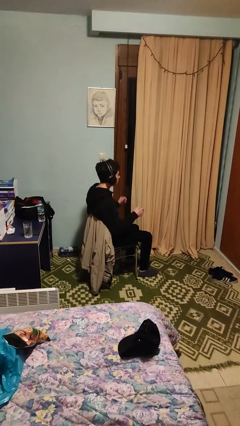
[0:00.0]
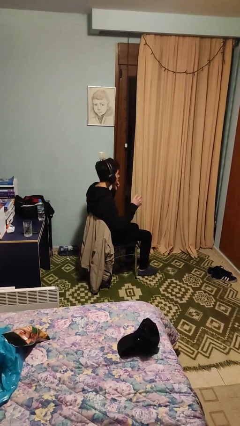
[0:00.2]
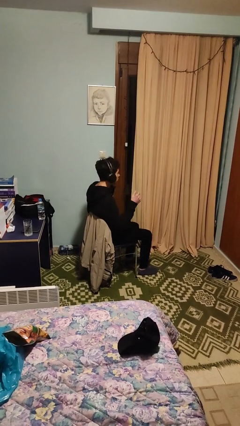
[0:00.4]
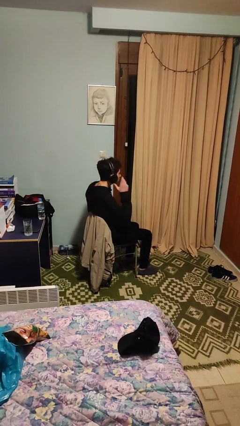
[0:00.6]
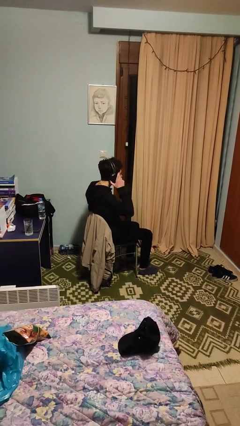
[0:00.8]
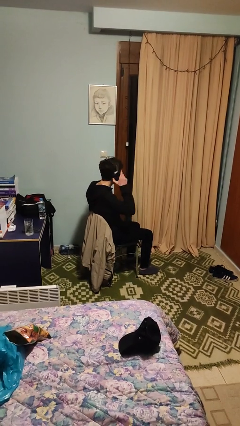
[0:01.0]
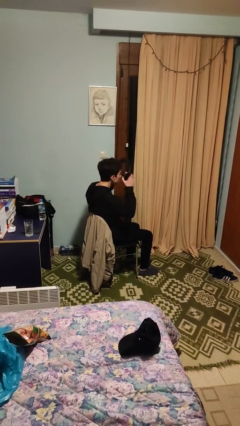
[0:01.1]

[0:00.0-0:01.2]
person takes off headphones

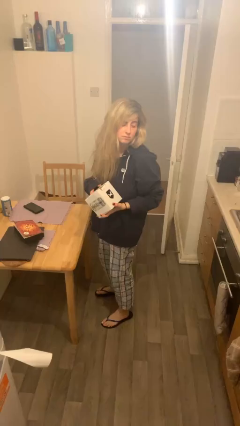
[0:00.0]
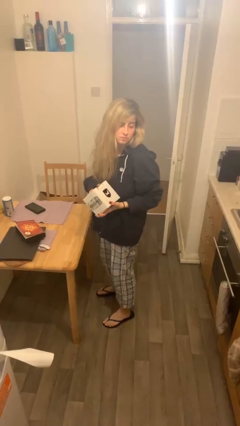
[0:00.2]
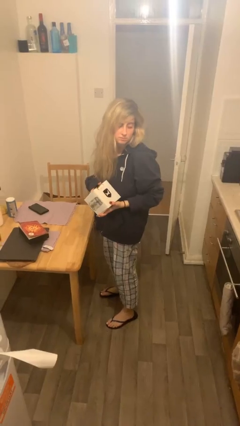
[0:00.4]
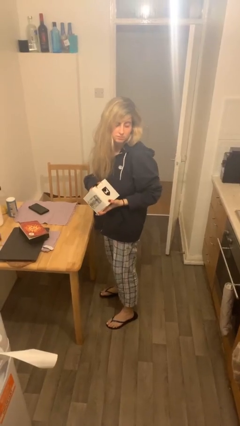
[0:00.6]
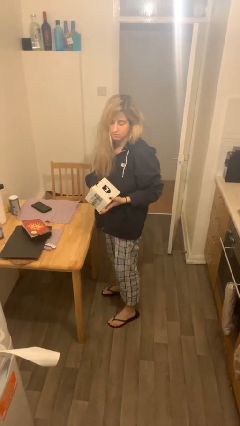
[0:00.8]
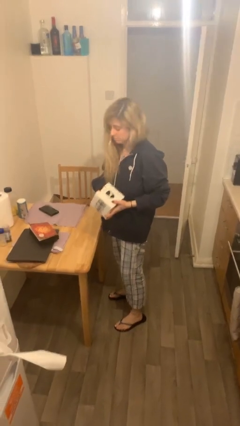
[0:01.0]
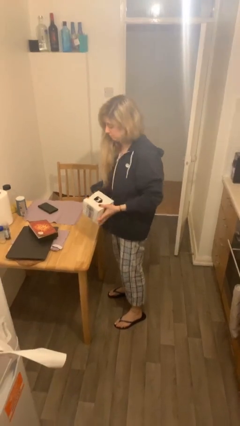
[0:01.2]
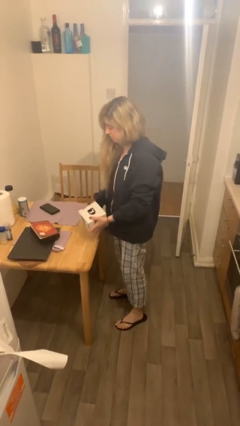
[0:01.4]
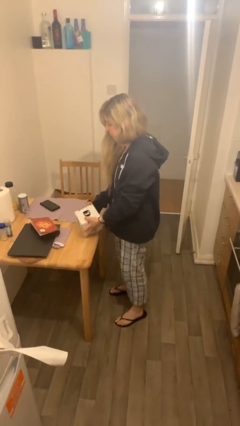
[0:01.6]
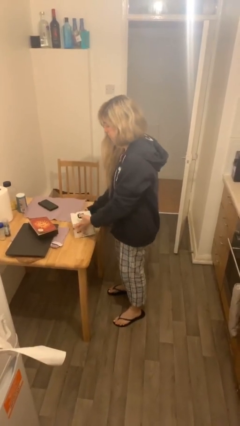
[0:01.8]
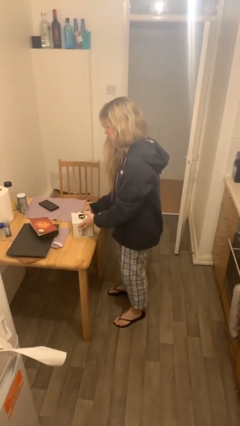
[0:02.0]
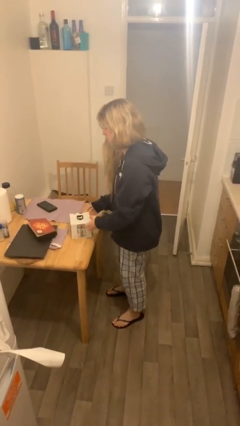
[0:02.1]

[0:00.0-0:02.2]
person puts down object on table

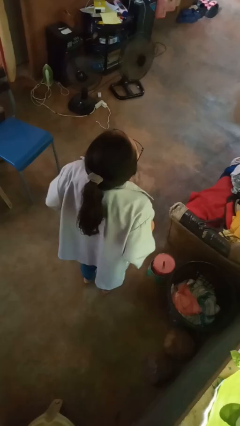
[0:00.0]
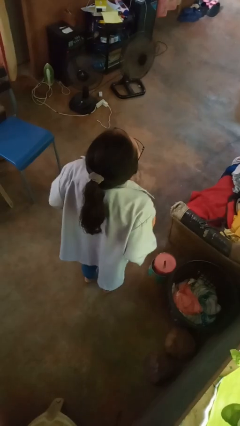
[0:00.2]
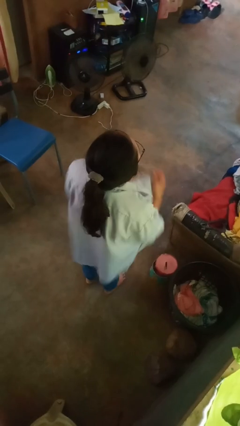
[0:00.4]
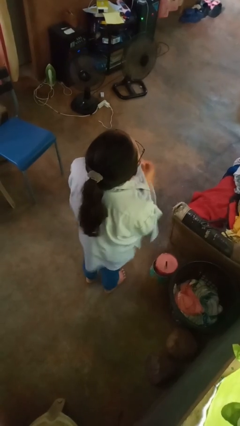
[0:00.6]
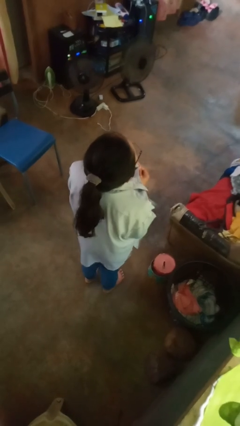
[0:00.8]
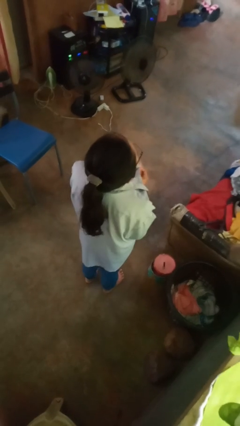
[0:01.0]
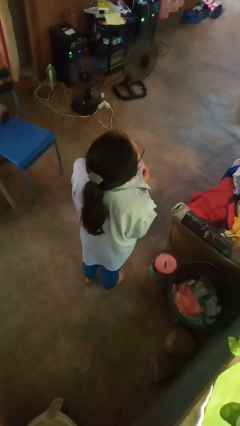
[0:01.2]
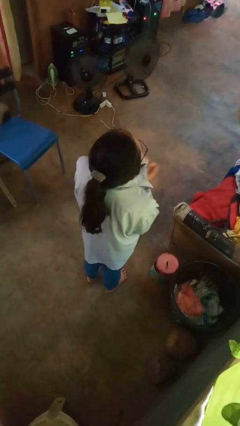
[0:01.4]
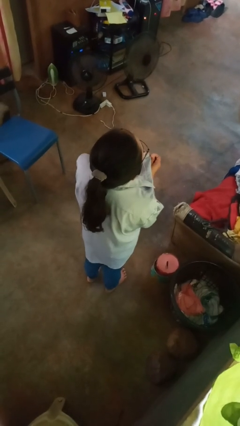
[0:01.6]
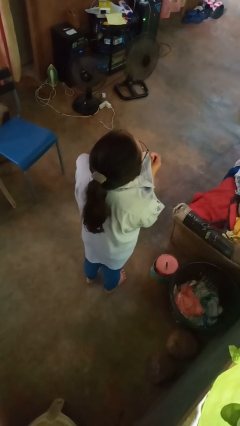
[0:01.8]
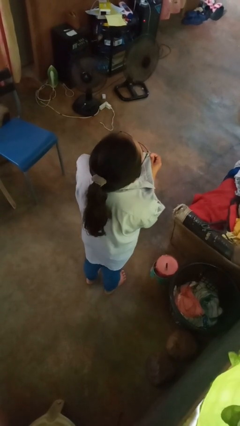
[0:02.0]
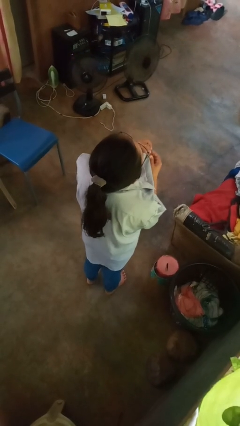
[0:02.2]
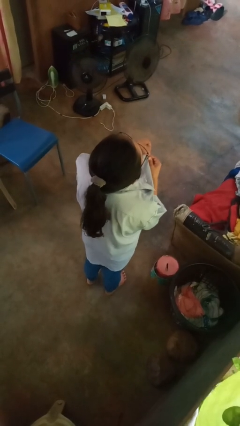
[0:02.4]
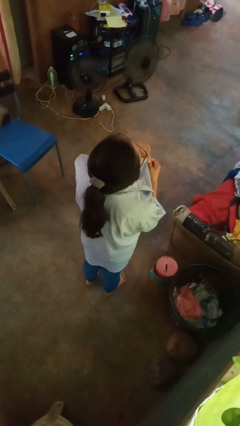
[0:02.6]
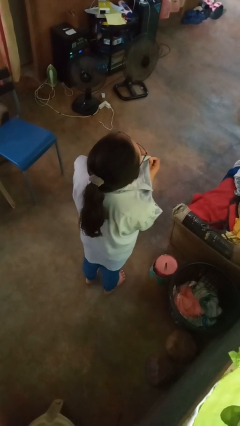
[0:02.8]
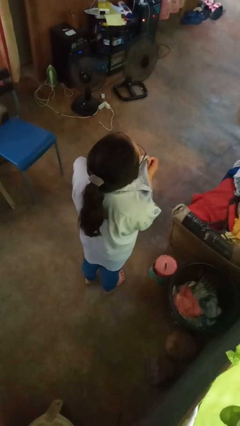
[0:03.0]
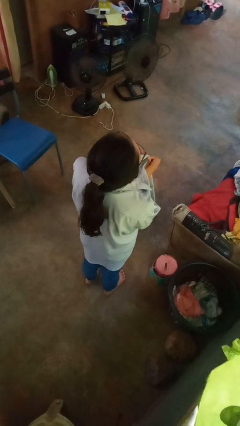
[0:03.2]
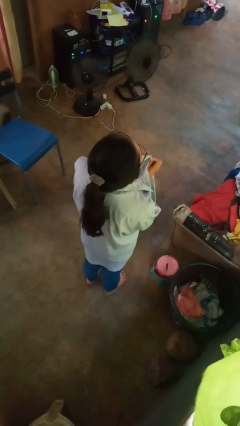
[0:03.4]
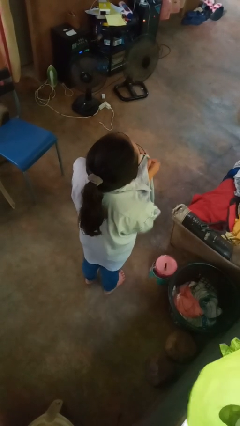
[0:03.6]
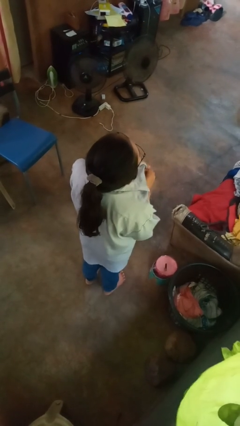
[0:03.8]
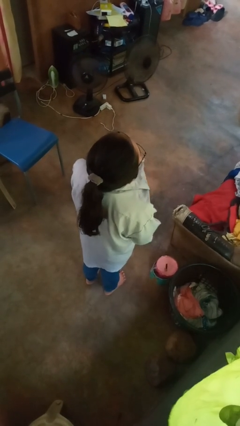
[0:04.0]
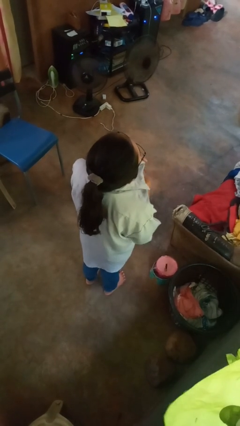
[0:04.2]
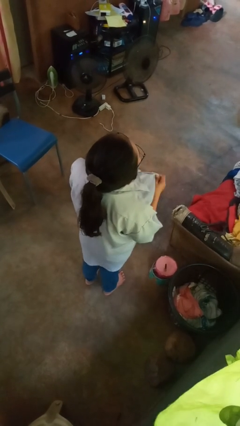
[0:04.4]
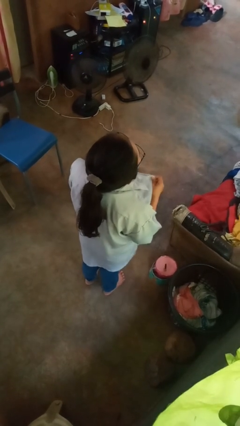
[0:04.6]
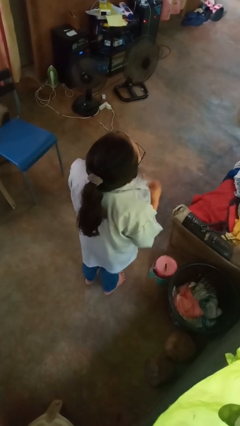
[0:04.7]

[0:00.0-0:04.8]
person buttons shirt

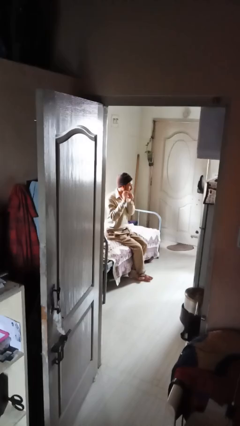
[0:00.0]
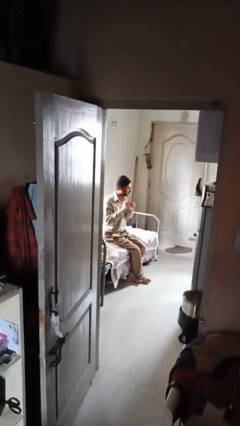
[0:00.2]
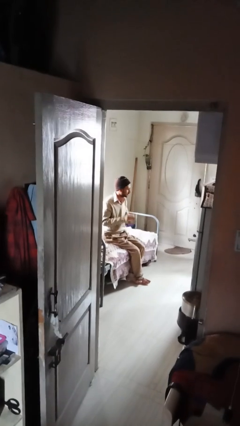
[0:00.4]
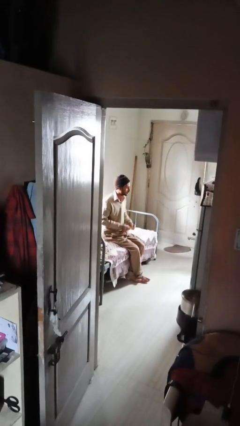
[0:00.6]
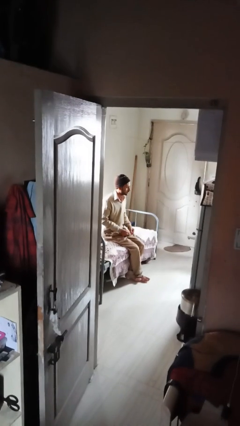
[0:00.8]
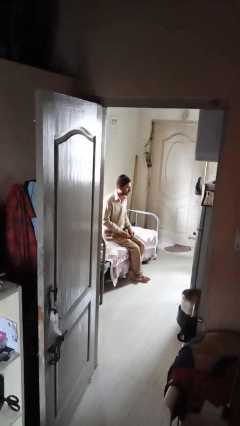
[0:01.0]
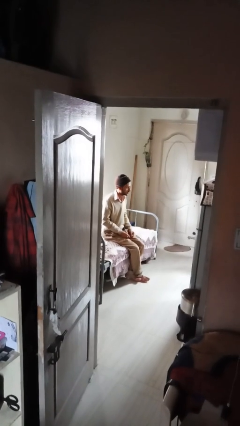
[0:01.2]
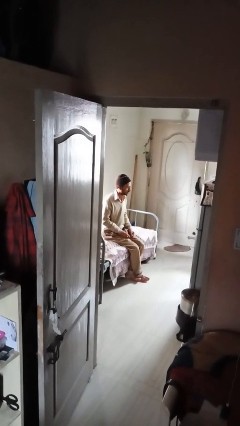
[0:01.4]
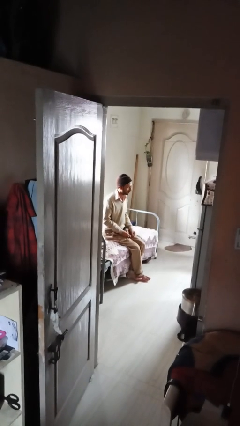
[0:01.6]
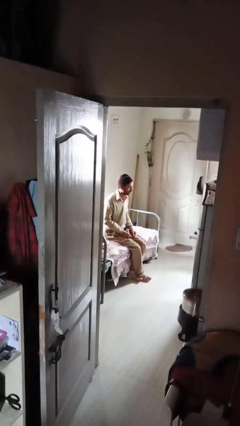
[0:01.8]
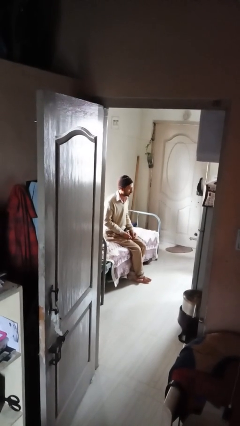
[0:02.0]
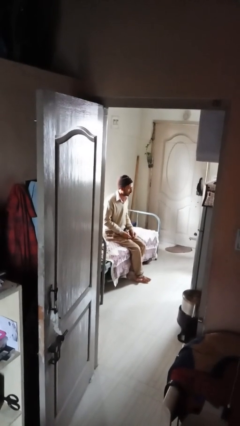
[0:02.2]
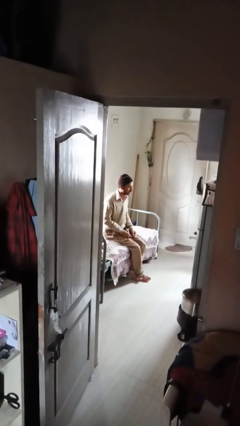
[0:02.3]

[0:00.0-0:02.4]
person takes off earrings

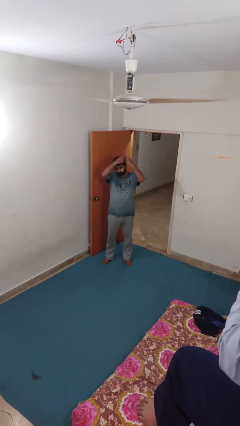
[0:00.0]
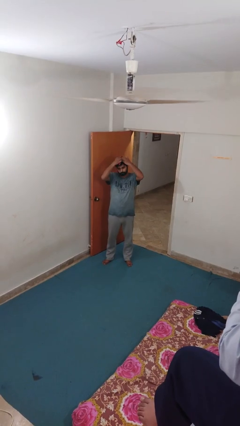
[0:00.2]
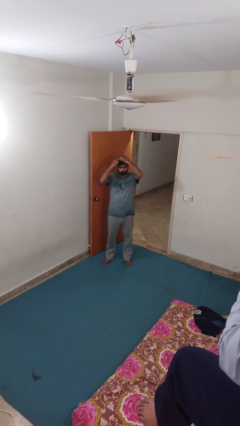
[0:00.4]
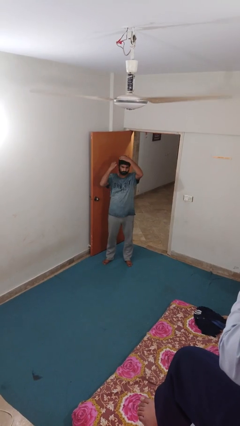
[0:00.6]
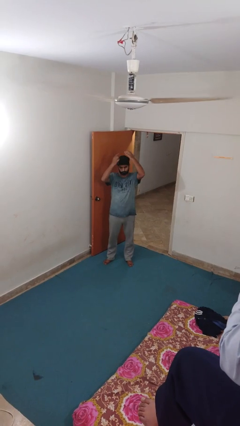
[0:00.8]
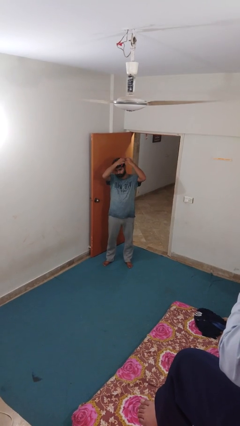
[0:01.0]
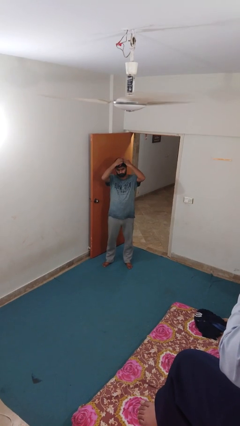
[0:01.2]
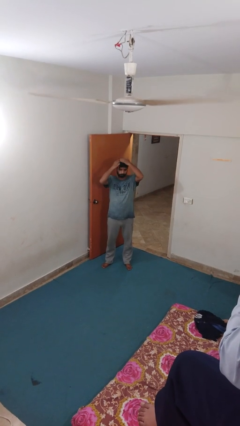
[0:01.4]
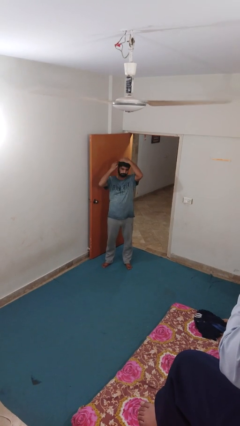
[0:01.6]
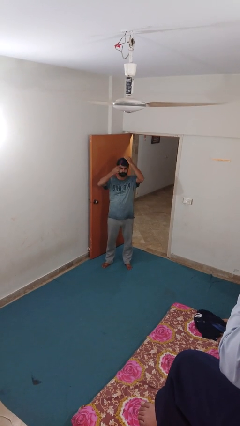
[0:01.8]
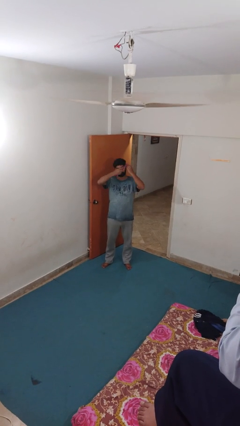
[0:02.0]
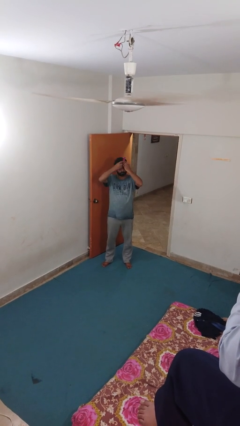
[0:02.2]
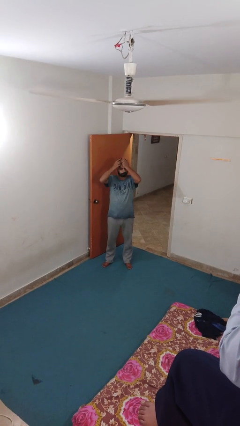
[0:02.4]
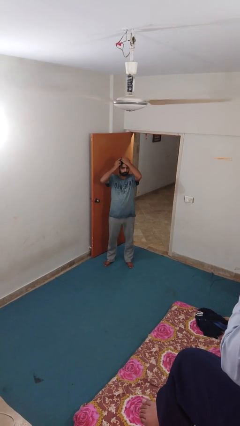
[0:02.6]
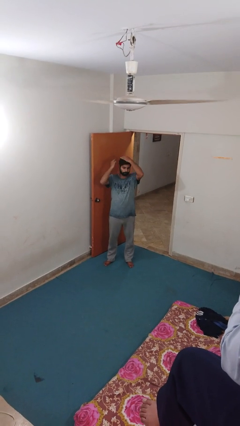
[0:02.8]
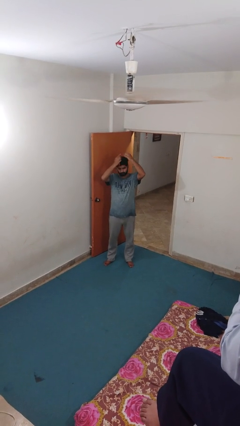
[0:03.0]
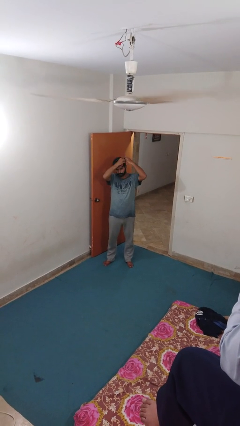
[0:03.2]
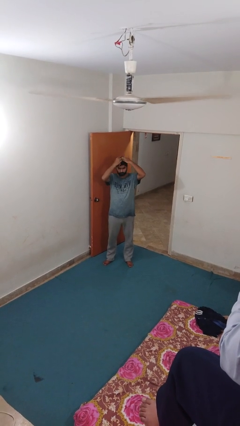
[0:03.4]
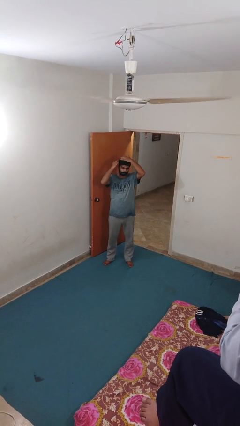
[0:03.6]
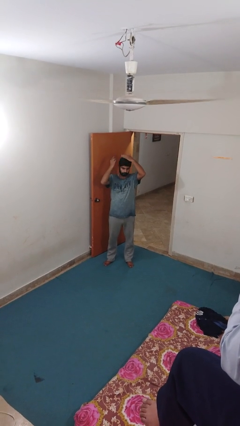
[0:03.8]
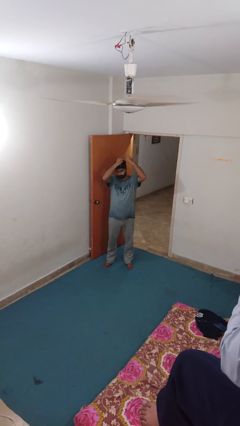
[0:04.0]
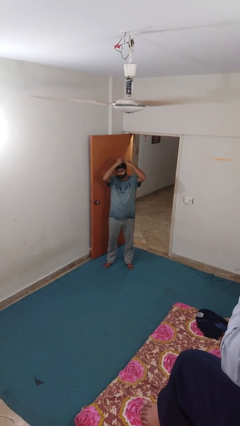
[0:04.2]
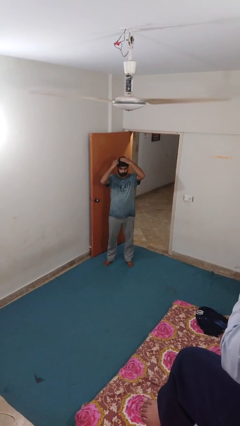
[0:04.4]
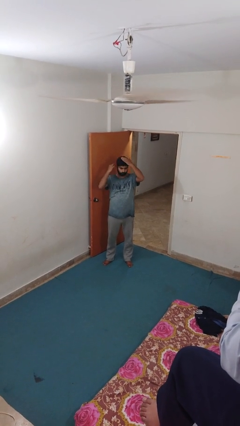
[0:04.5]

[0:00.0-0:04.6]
person brushes hair

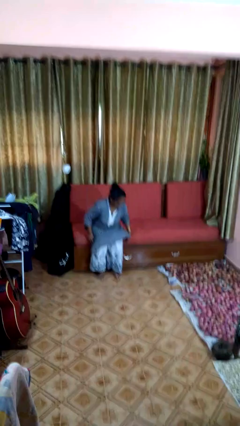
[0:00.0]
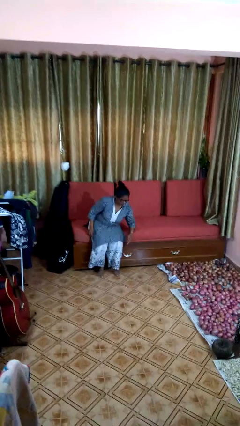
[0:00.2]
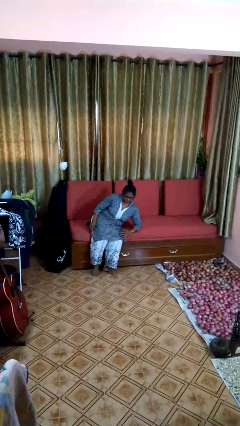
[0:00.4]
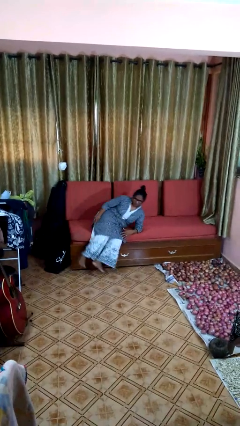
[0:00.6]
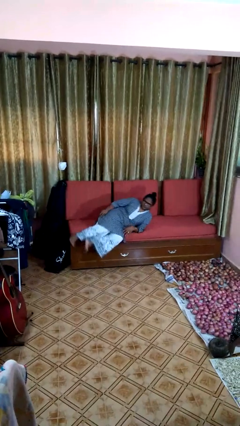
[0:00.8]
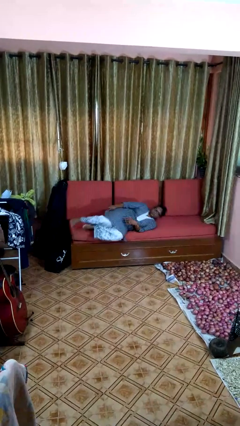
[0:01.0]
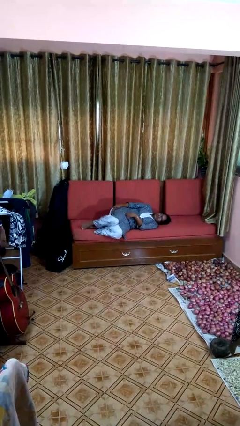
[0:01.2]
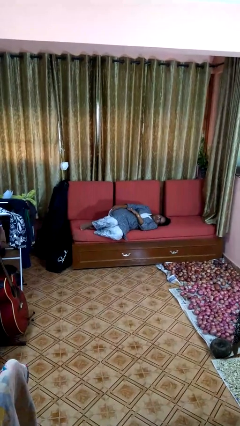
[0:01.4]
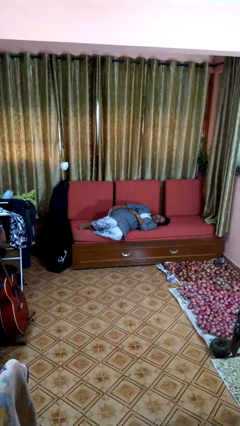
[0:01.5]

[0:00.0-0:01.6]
person lies down on couch

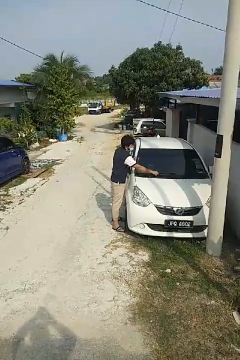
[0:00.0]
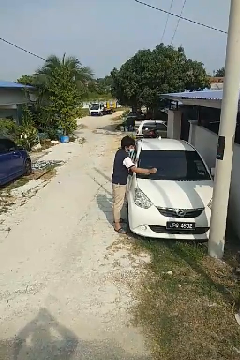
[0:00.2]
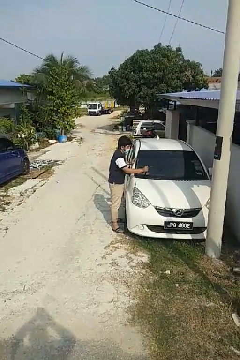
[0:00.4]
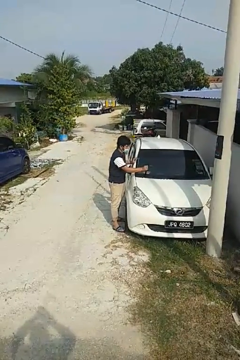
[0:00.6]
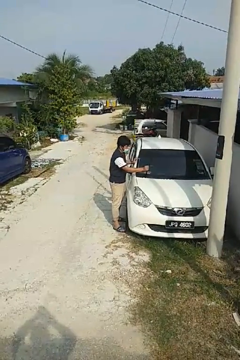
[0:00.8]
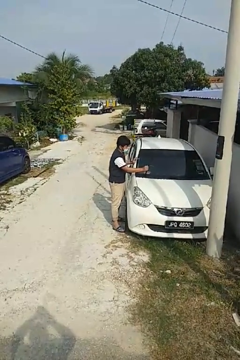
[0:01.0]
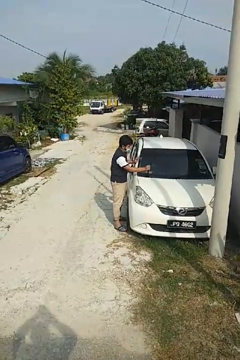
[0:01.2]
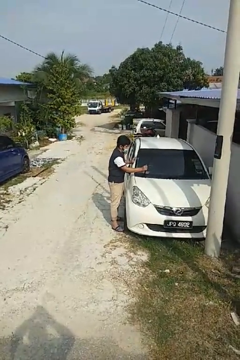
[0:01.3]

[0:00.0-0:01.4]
person flips up car wipers
